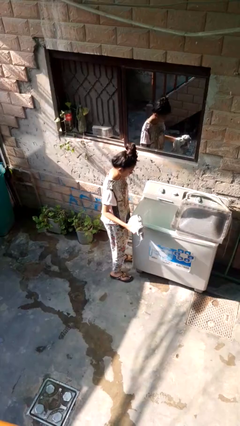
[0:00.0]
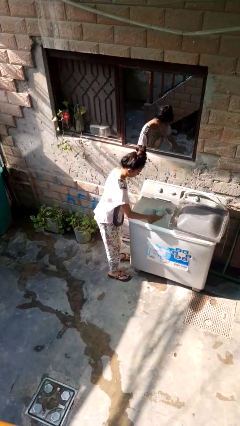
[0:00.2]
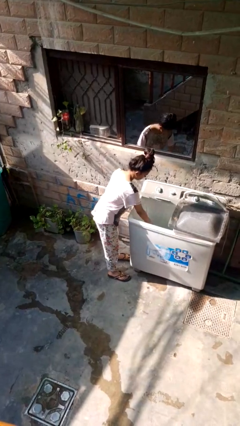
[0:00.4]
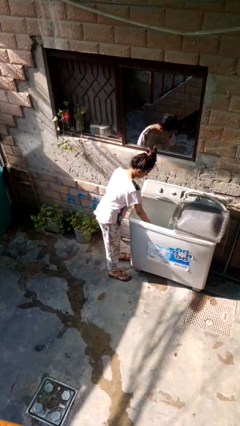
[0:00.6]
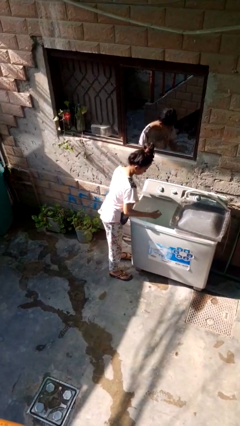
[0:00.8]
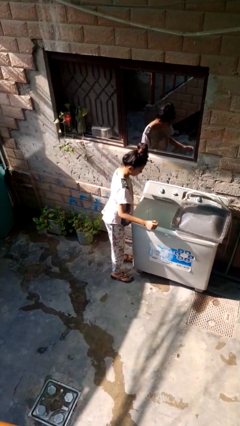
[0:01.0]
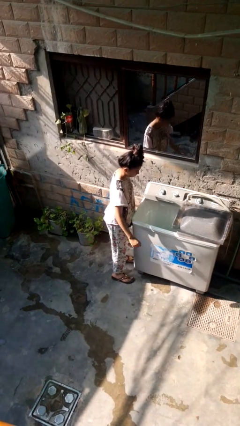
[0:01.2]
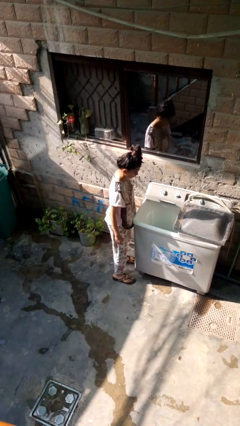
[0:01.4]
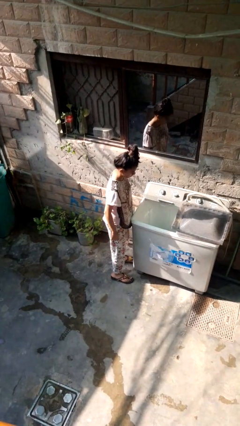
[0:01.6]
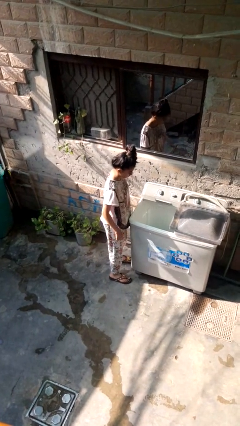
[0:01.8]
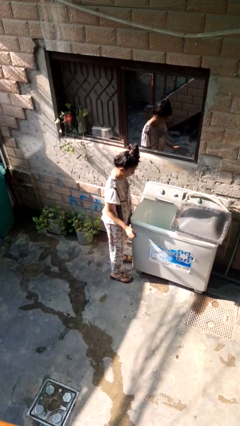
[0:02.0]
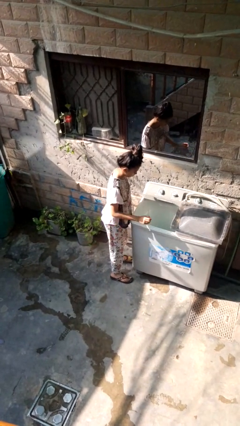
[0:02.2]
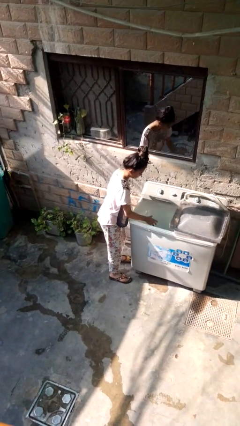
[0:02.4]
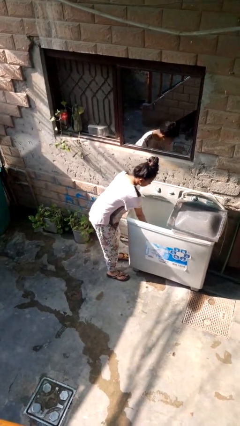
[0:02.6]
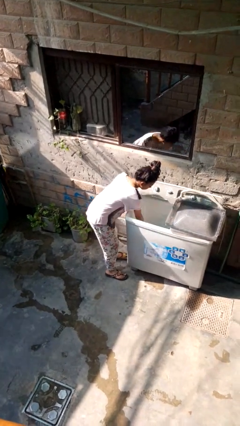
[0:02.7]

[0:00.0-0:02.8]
person loads clotheswasher

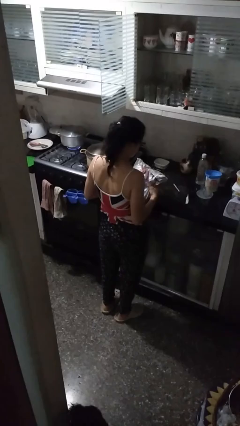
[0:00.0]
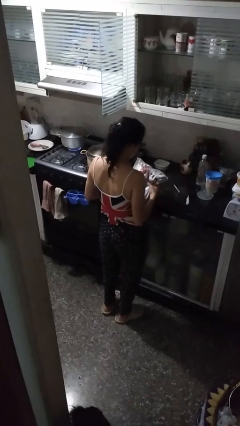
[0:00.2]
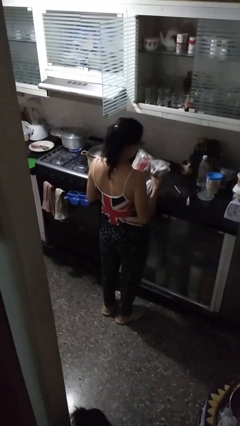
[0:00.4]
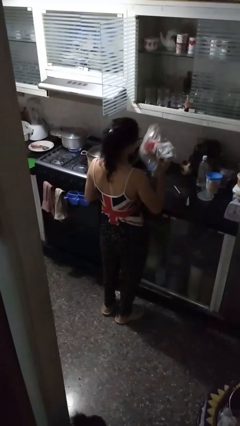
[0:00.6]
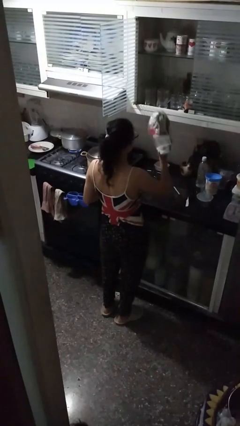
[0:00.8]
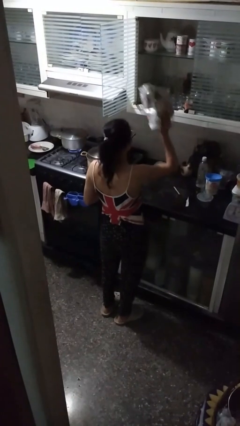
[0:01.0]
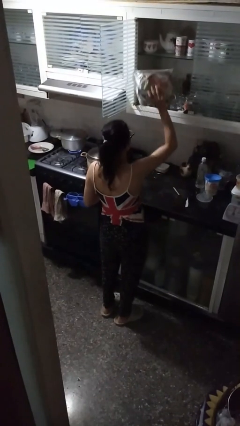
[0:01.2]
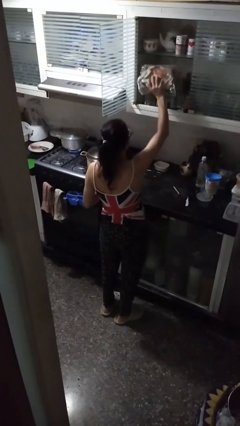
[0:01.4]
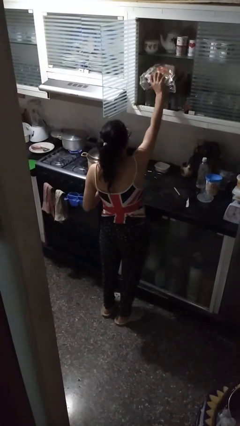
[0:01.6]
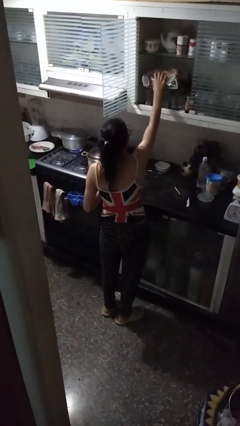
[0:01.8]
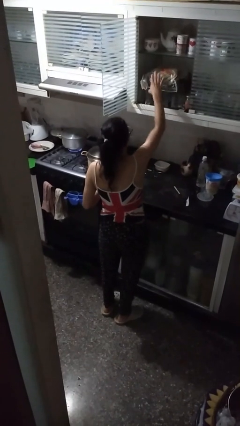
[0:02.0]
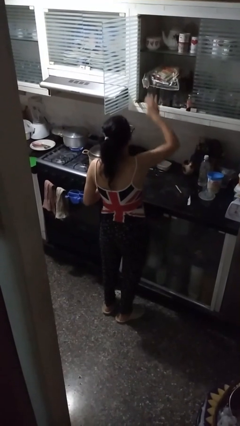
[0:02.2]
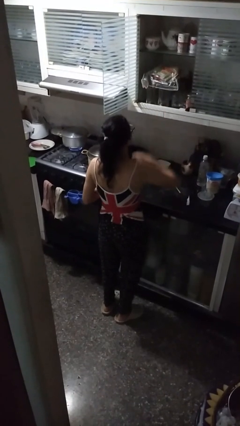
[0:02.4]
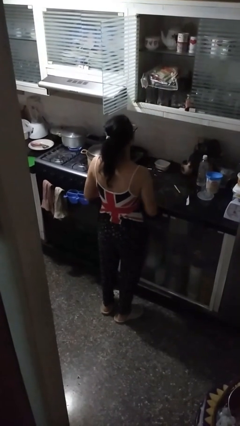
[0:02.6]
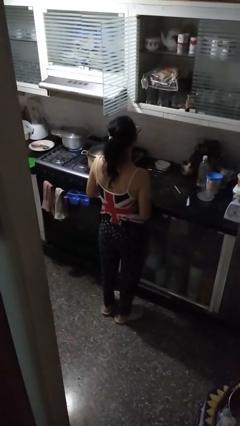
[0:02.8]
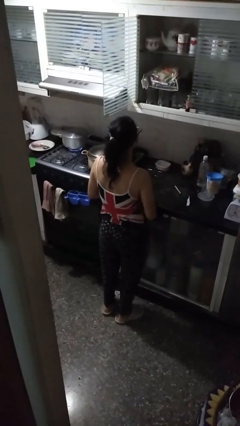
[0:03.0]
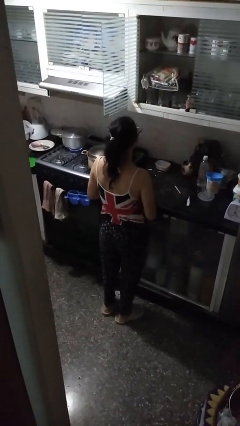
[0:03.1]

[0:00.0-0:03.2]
person puts down object into cabinet

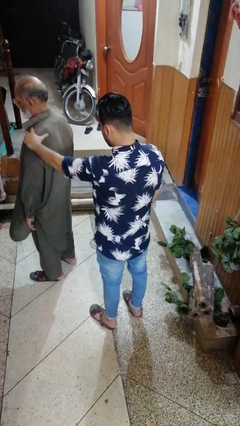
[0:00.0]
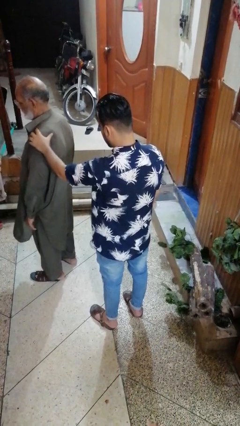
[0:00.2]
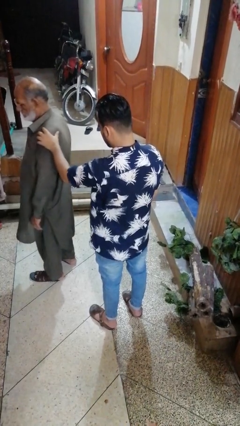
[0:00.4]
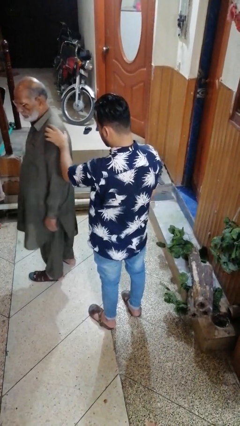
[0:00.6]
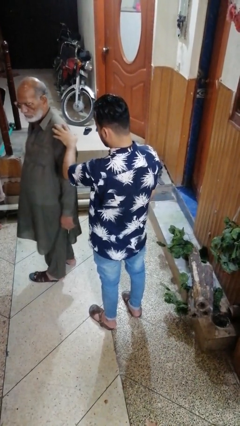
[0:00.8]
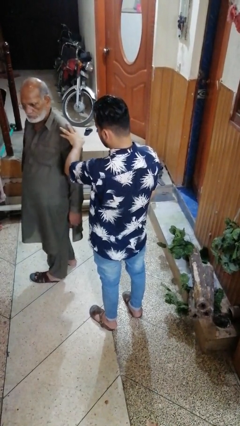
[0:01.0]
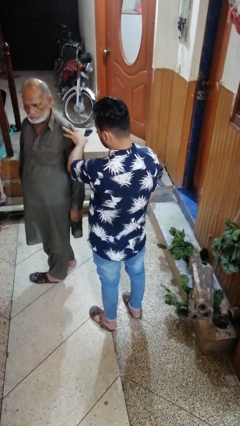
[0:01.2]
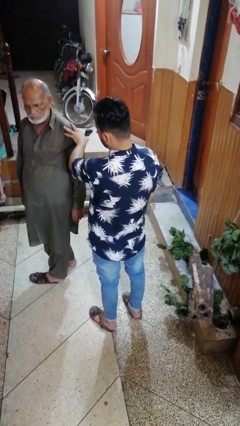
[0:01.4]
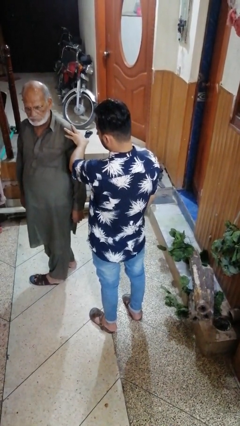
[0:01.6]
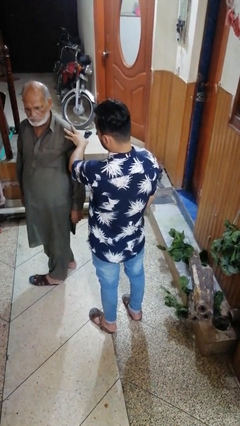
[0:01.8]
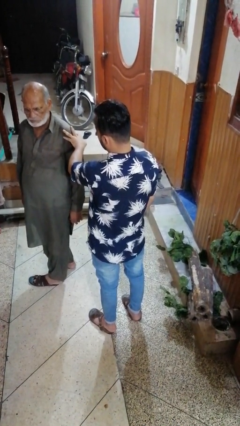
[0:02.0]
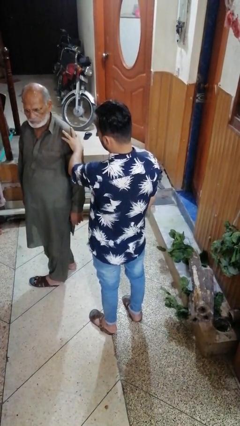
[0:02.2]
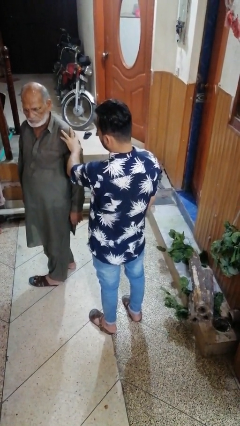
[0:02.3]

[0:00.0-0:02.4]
person spins person around

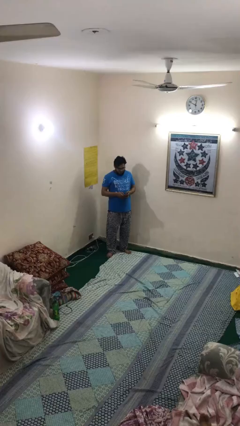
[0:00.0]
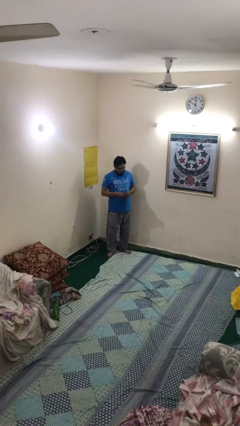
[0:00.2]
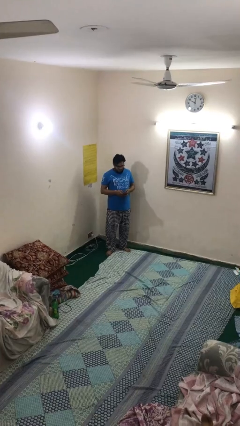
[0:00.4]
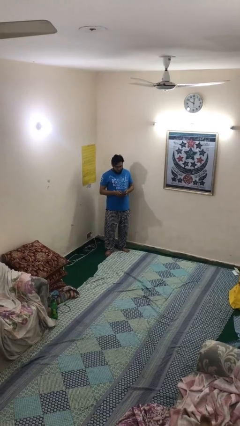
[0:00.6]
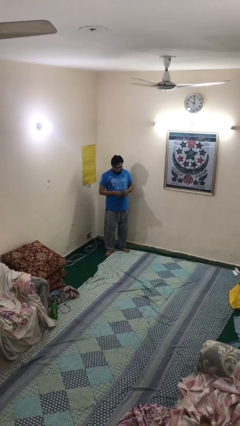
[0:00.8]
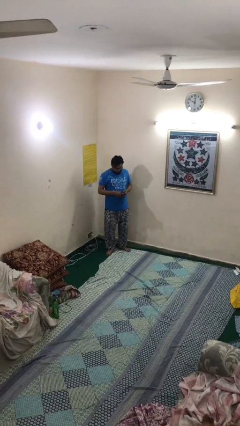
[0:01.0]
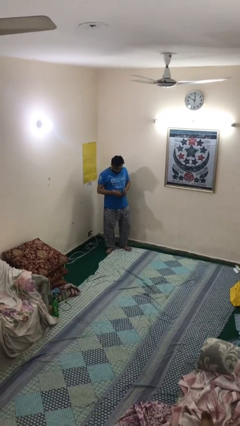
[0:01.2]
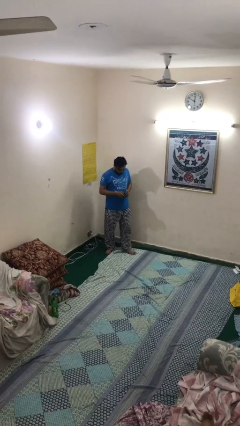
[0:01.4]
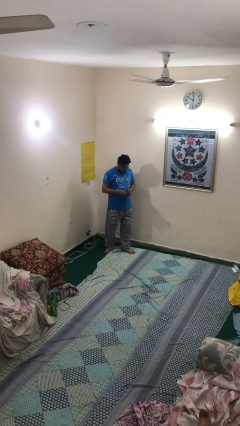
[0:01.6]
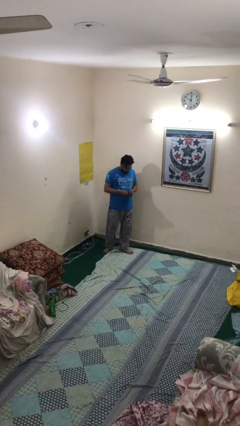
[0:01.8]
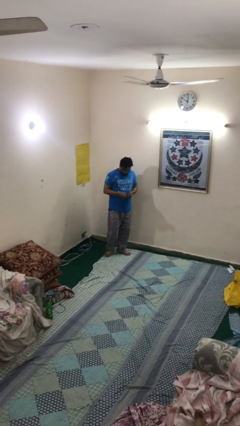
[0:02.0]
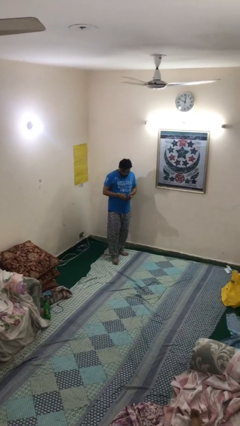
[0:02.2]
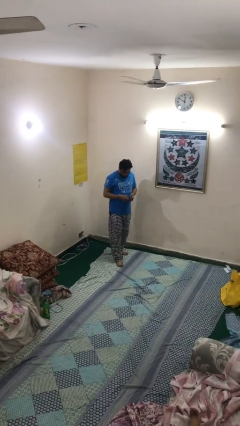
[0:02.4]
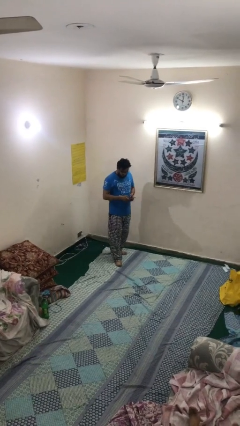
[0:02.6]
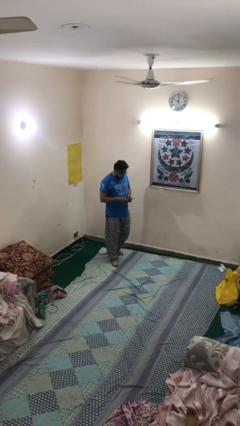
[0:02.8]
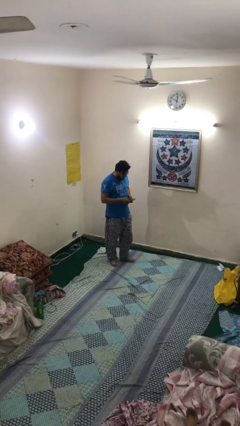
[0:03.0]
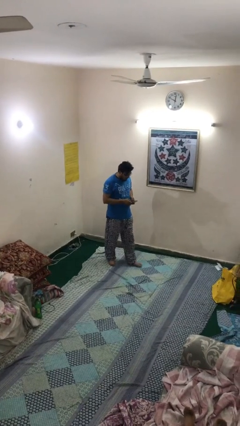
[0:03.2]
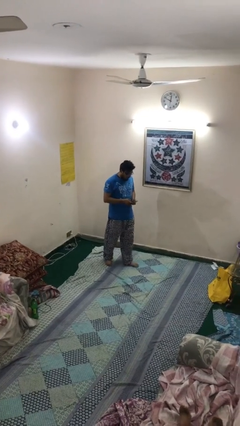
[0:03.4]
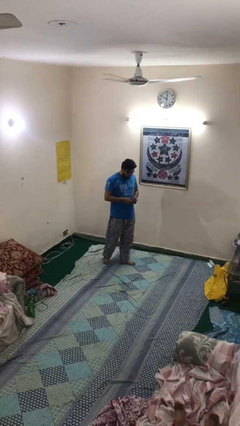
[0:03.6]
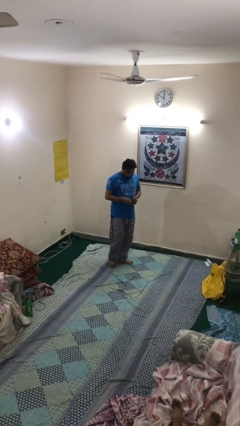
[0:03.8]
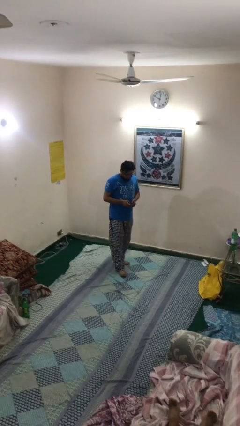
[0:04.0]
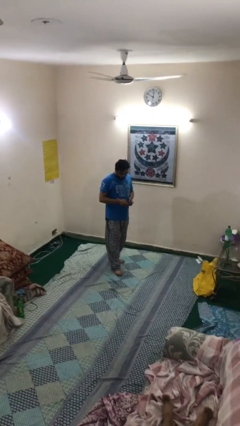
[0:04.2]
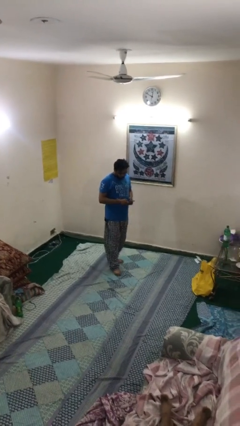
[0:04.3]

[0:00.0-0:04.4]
person texts on phone

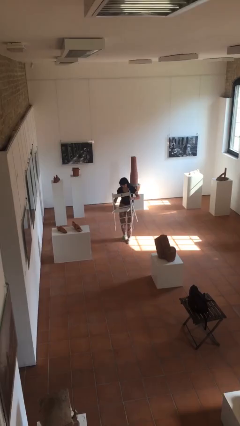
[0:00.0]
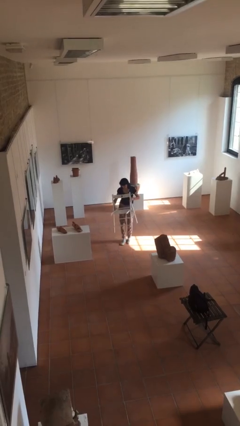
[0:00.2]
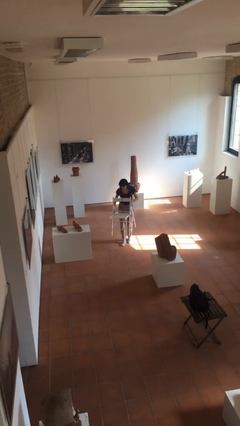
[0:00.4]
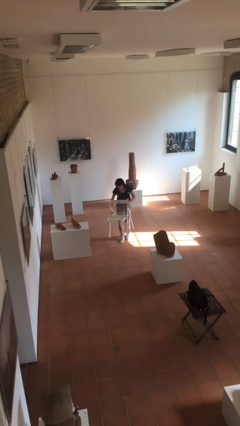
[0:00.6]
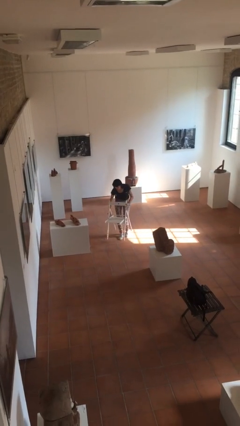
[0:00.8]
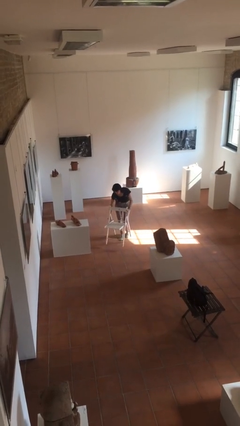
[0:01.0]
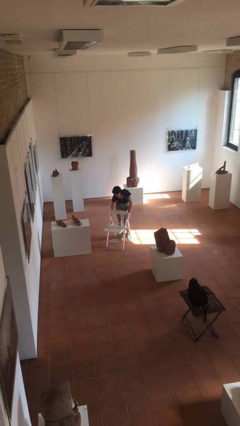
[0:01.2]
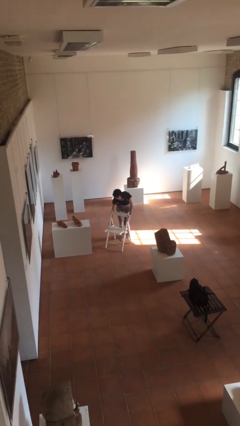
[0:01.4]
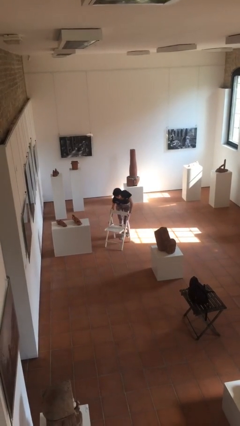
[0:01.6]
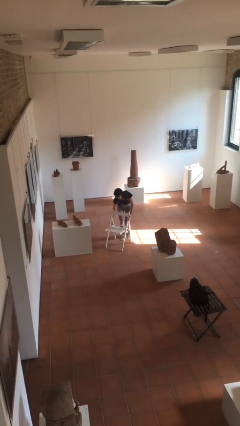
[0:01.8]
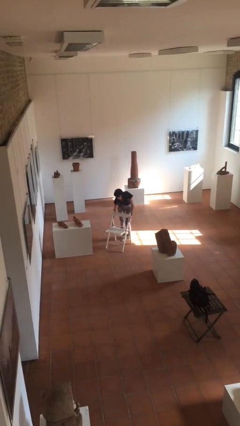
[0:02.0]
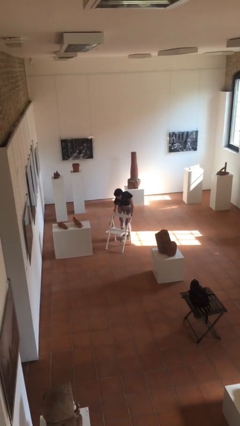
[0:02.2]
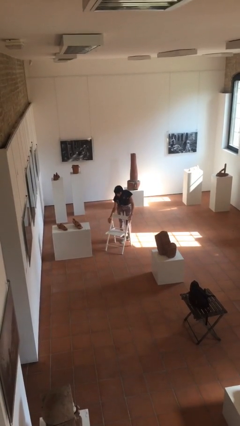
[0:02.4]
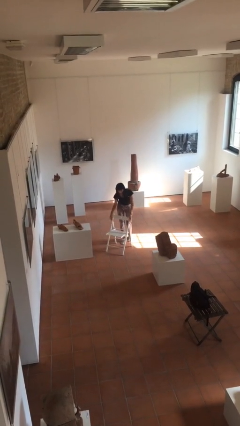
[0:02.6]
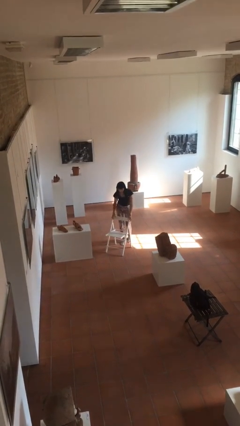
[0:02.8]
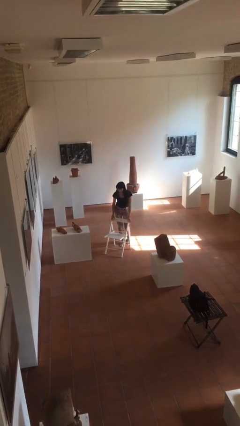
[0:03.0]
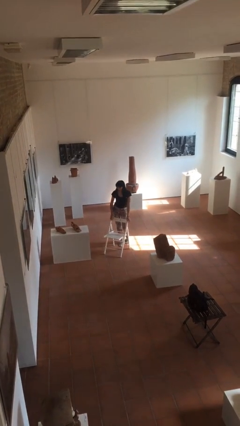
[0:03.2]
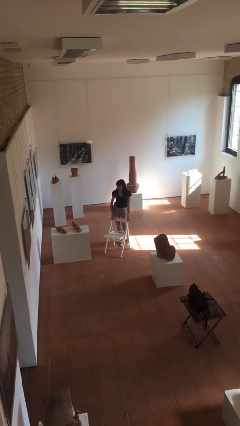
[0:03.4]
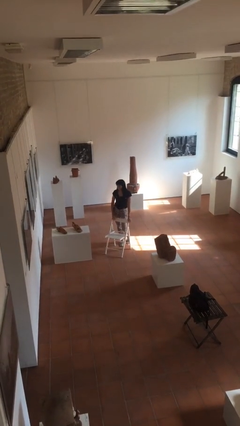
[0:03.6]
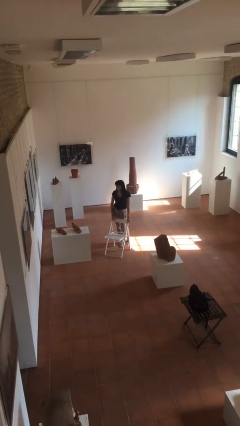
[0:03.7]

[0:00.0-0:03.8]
person puts down object on floor

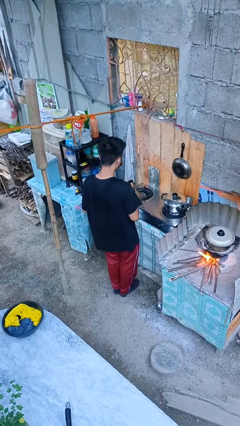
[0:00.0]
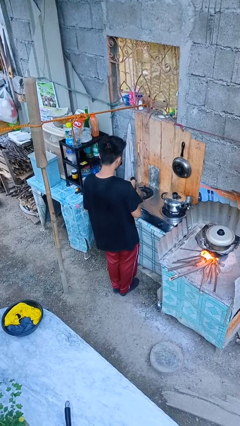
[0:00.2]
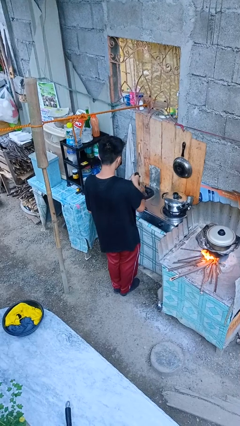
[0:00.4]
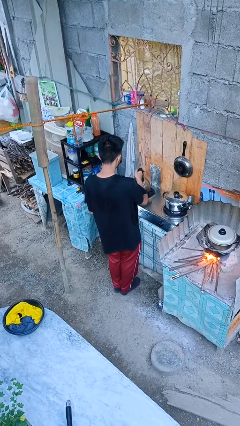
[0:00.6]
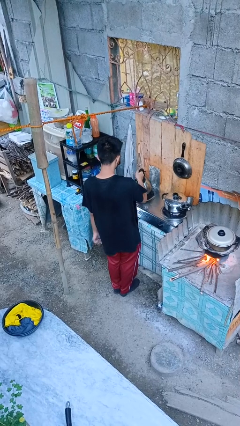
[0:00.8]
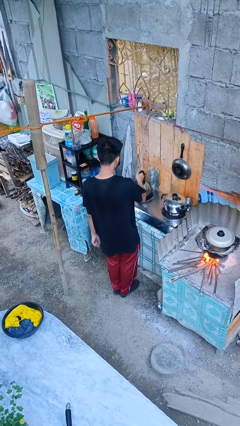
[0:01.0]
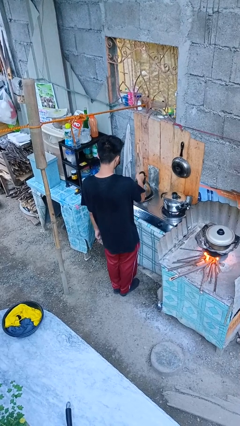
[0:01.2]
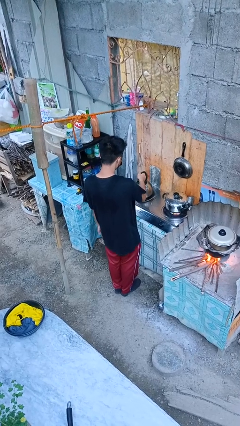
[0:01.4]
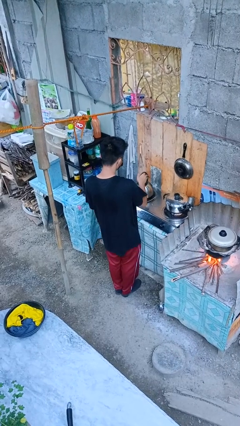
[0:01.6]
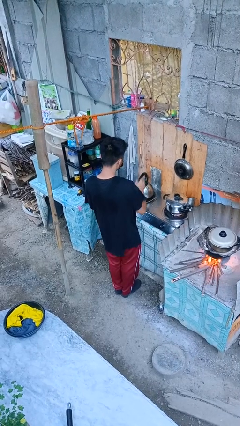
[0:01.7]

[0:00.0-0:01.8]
person puts down object on countertop
